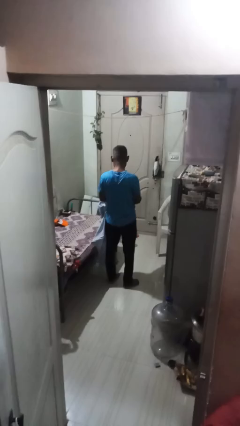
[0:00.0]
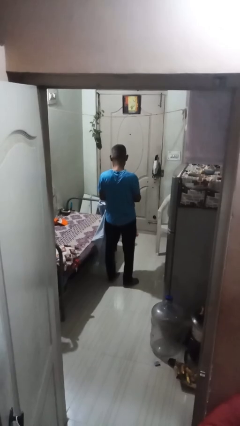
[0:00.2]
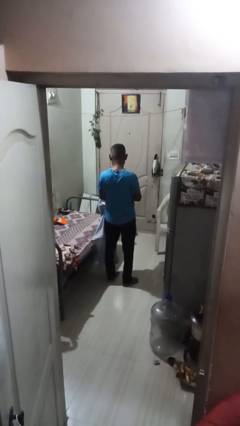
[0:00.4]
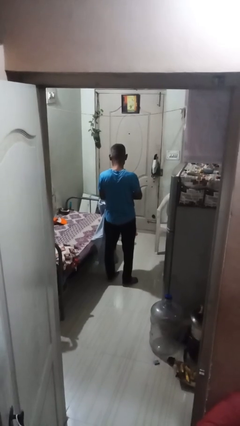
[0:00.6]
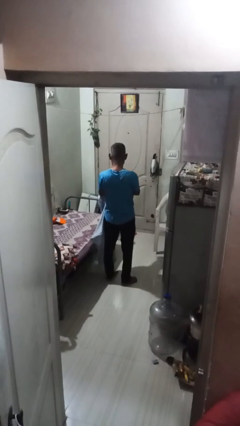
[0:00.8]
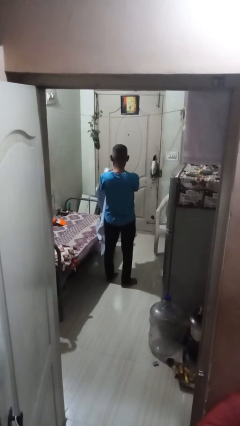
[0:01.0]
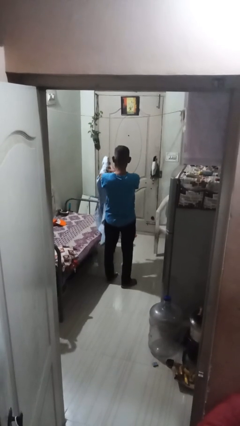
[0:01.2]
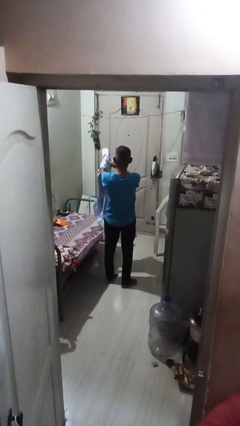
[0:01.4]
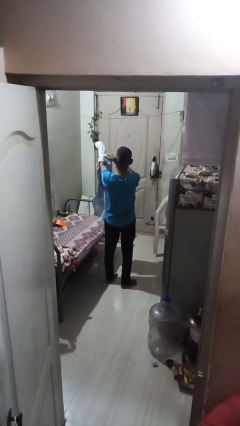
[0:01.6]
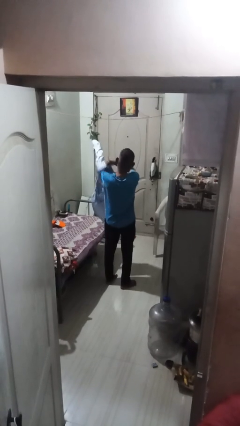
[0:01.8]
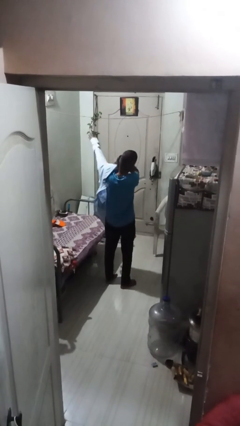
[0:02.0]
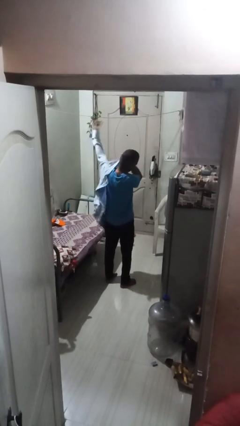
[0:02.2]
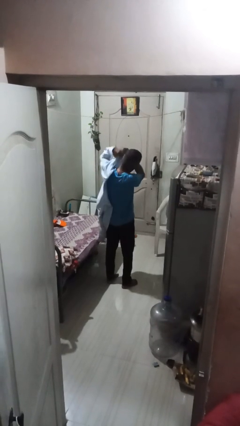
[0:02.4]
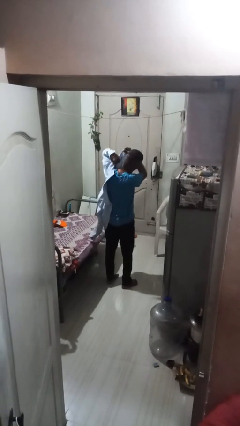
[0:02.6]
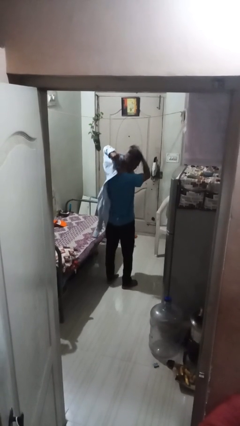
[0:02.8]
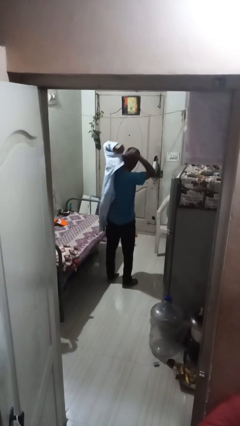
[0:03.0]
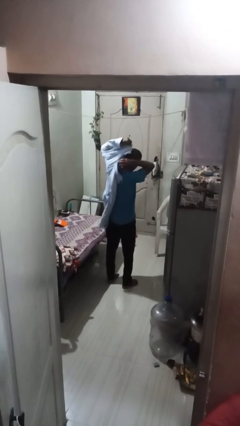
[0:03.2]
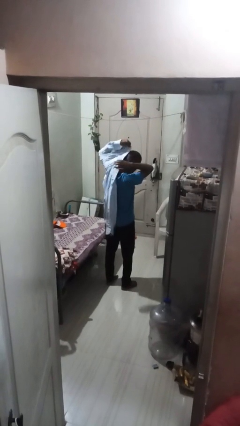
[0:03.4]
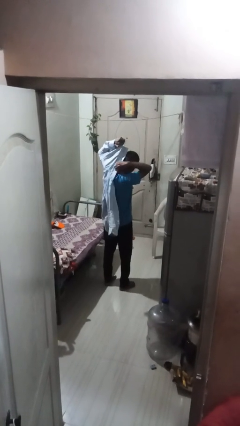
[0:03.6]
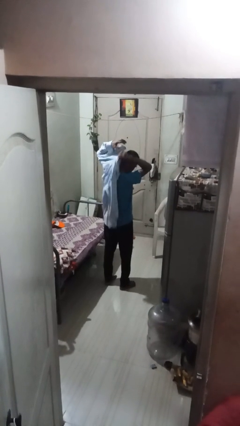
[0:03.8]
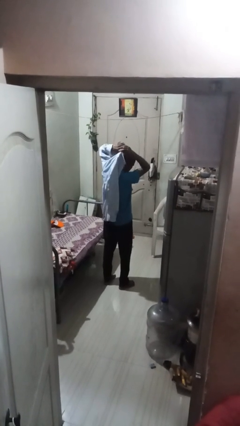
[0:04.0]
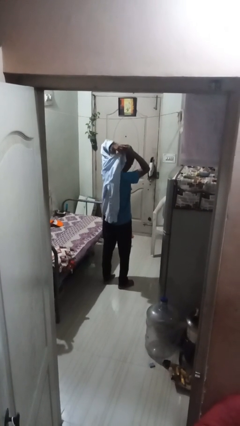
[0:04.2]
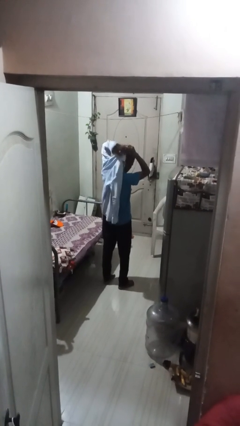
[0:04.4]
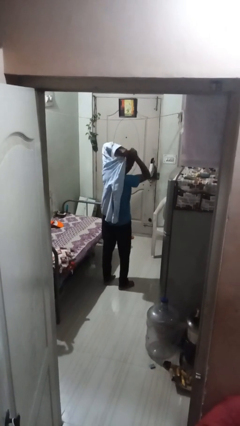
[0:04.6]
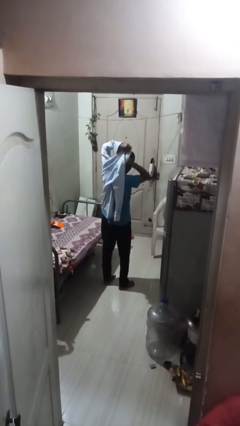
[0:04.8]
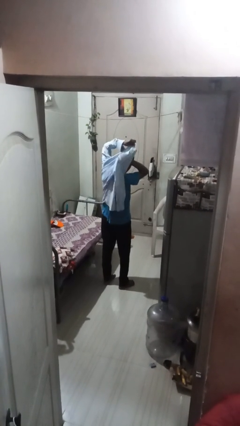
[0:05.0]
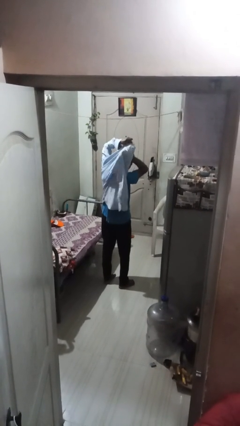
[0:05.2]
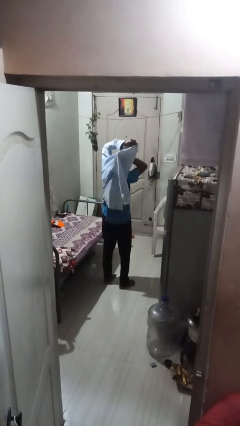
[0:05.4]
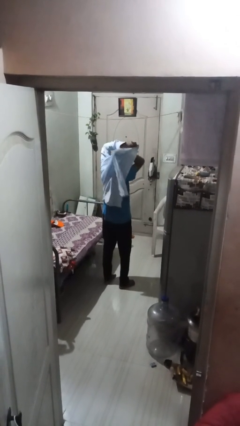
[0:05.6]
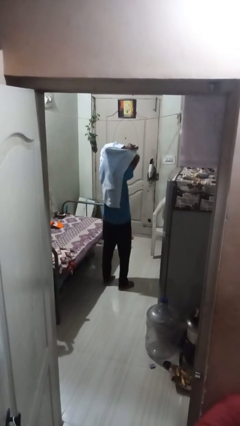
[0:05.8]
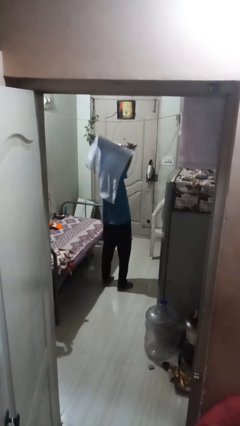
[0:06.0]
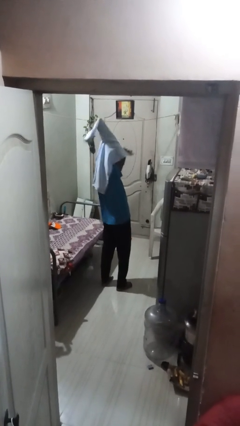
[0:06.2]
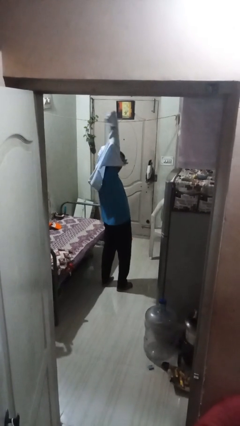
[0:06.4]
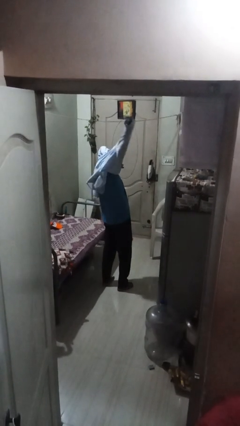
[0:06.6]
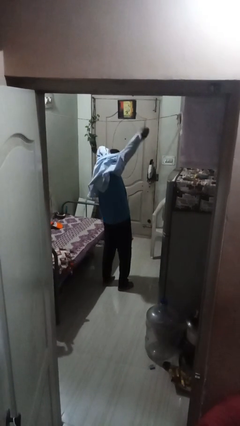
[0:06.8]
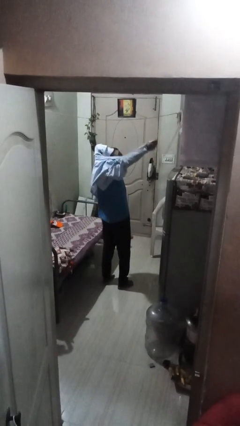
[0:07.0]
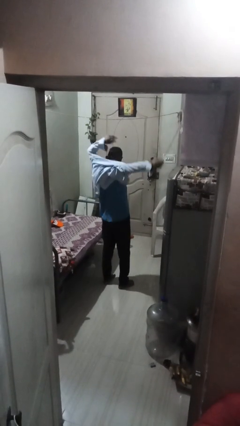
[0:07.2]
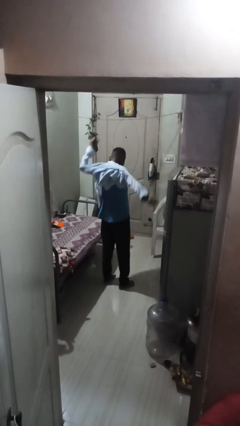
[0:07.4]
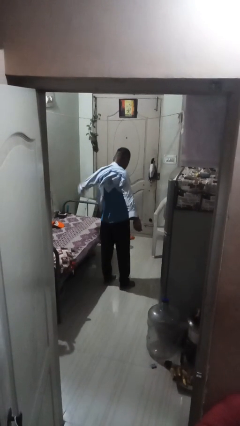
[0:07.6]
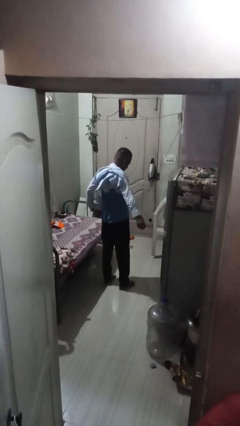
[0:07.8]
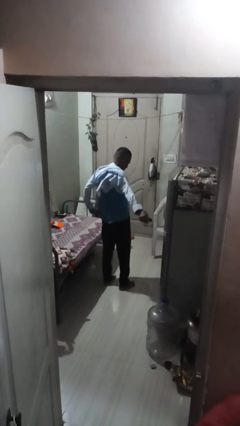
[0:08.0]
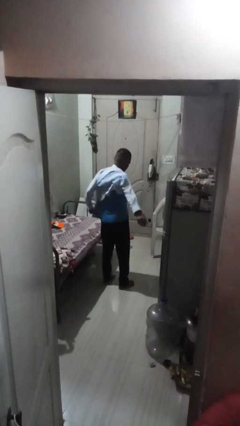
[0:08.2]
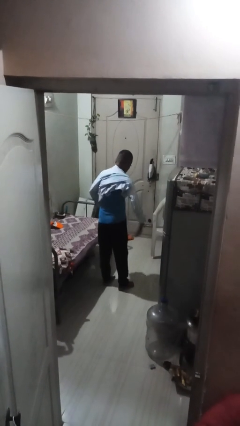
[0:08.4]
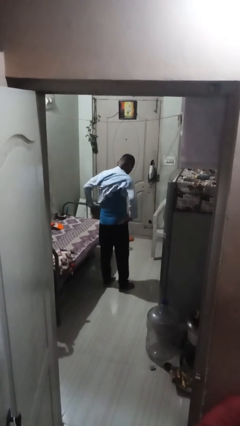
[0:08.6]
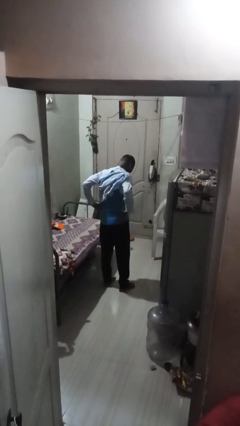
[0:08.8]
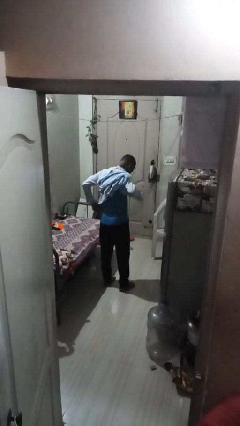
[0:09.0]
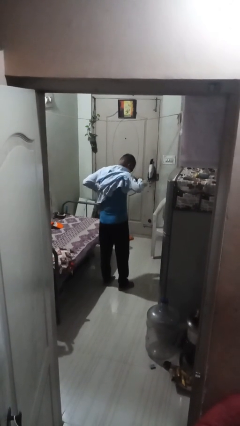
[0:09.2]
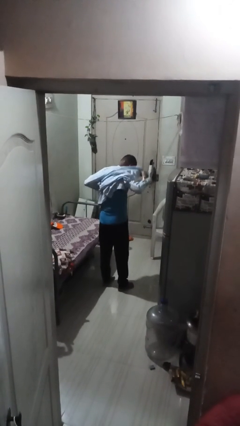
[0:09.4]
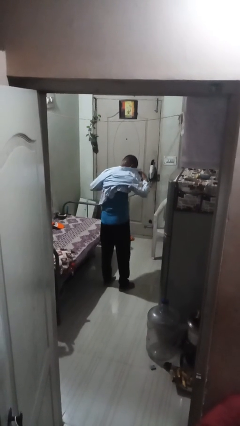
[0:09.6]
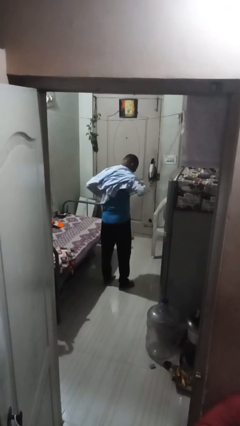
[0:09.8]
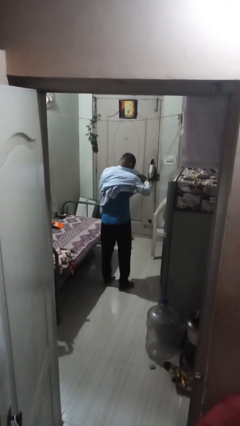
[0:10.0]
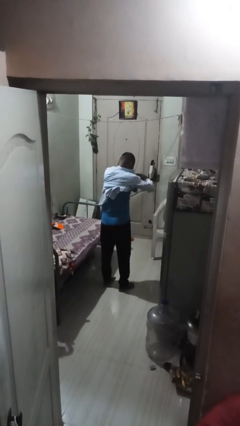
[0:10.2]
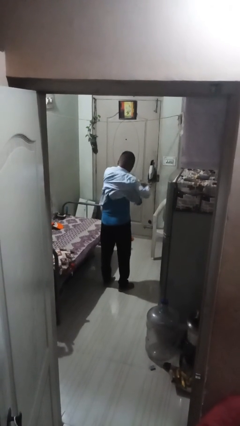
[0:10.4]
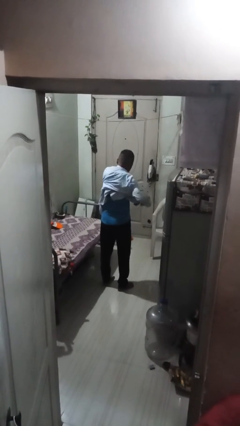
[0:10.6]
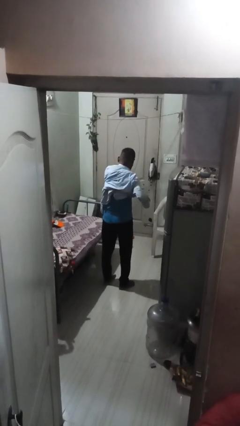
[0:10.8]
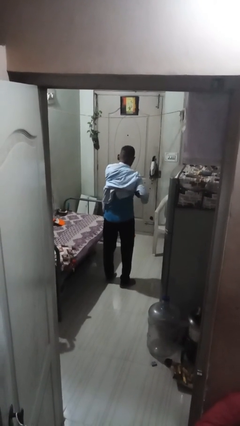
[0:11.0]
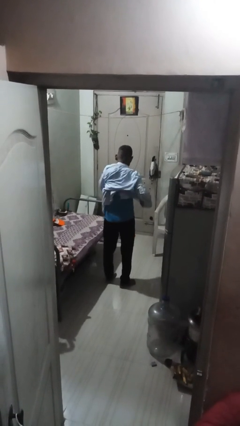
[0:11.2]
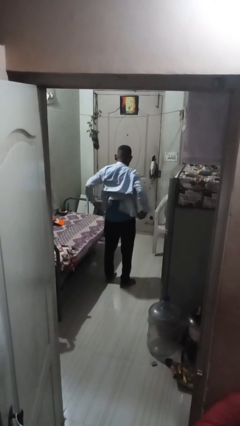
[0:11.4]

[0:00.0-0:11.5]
person puts on shirt

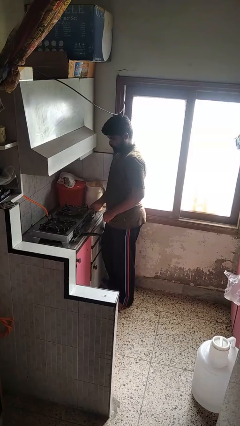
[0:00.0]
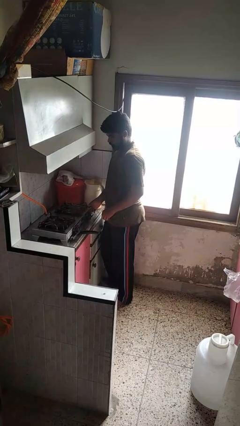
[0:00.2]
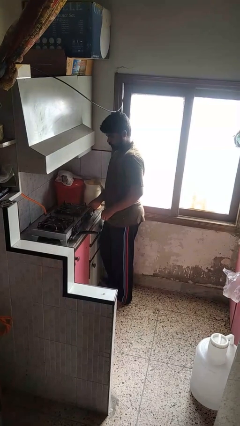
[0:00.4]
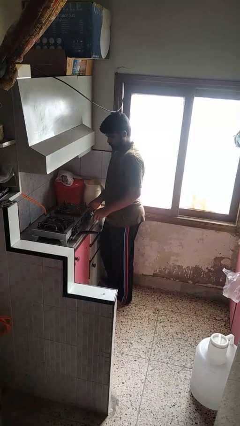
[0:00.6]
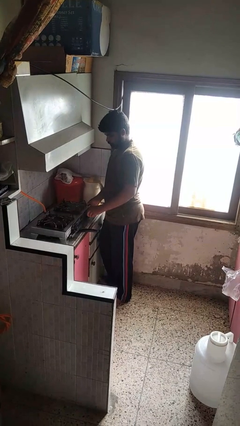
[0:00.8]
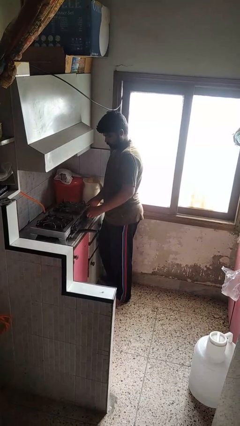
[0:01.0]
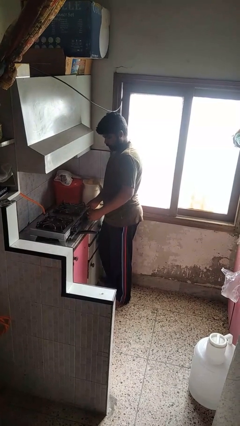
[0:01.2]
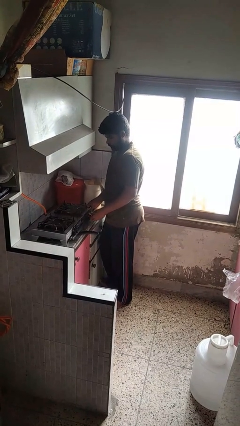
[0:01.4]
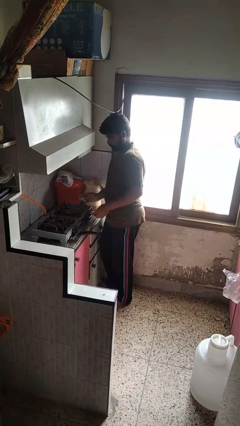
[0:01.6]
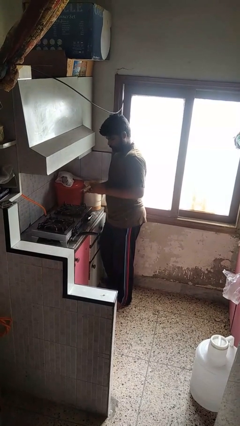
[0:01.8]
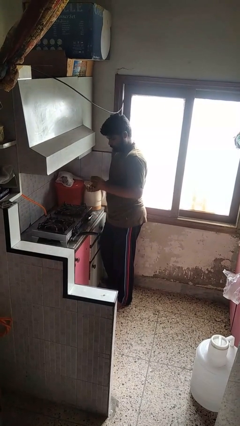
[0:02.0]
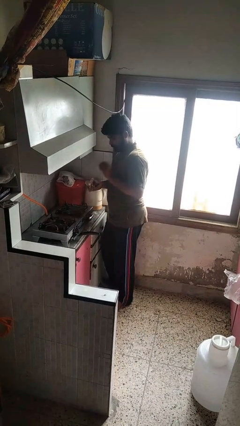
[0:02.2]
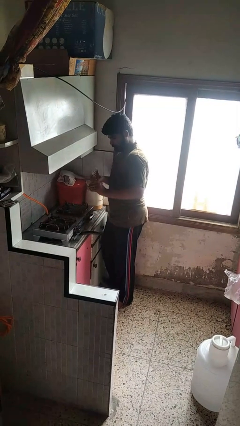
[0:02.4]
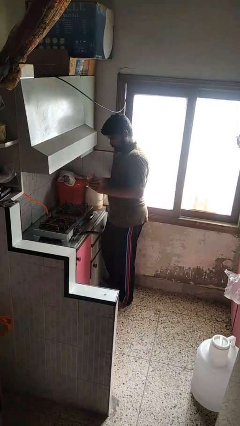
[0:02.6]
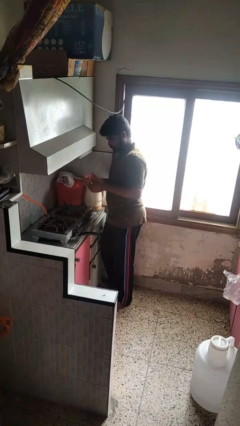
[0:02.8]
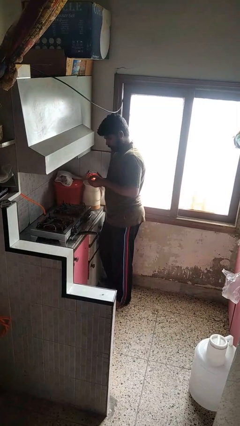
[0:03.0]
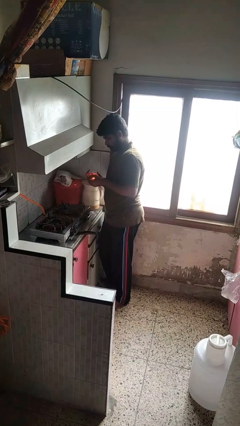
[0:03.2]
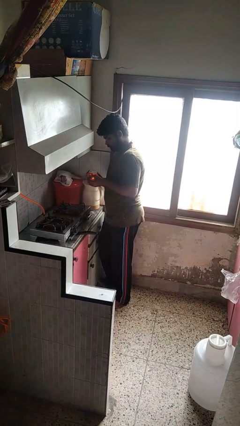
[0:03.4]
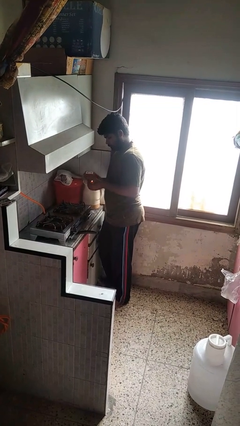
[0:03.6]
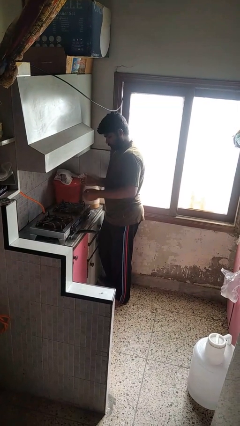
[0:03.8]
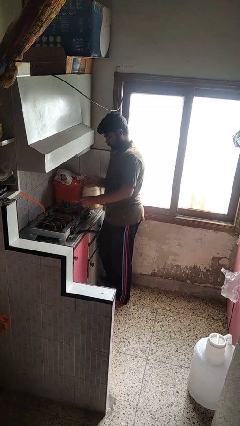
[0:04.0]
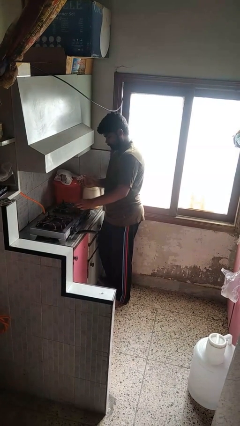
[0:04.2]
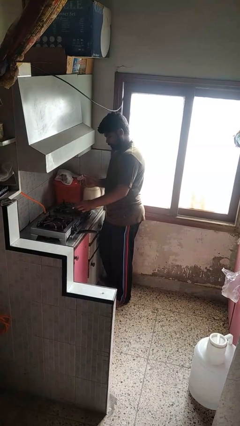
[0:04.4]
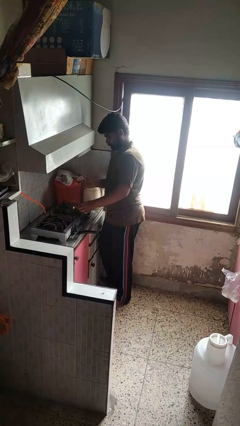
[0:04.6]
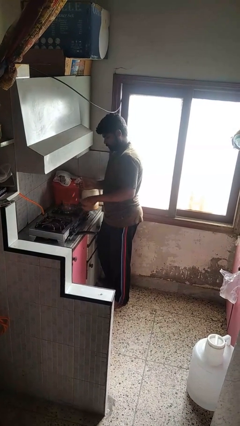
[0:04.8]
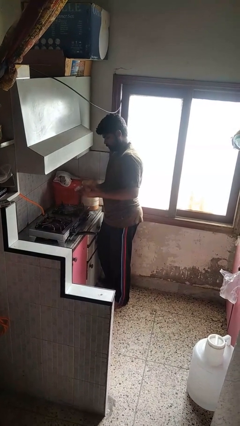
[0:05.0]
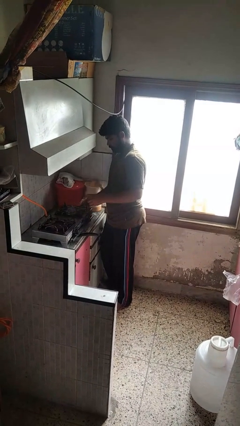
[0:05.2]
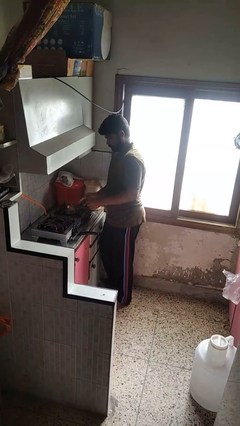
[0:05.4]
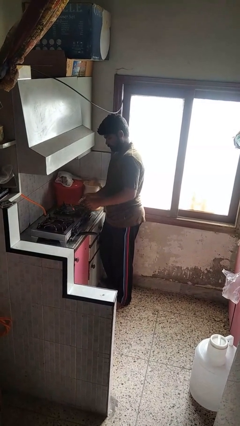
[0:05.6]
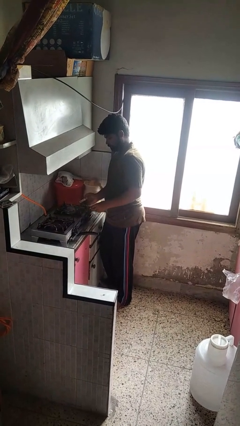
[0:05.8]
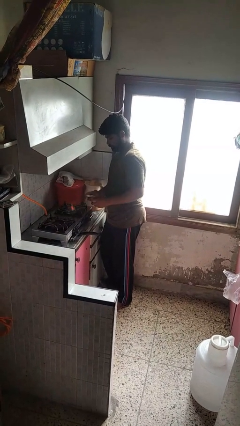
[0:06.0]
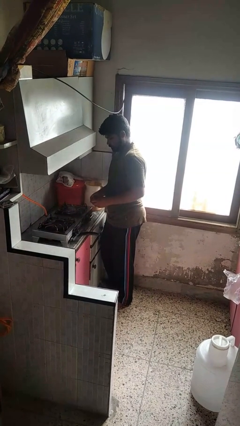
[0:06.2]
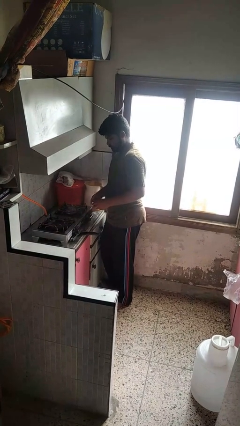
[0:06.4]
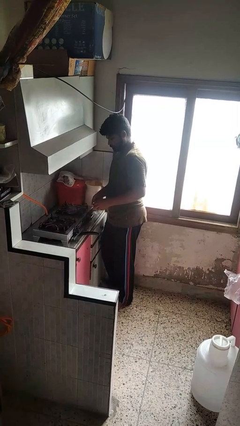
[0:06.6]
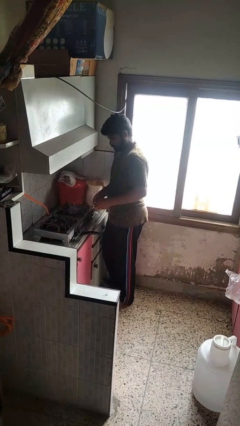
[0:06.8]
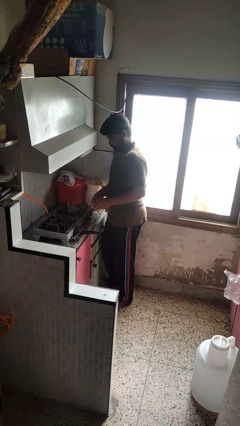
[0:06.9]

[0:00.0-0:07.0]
person turns on stovetop
